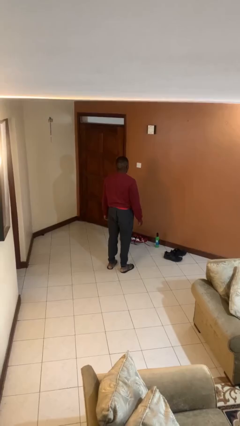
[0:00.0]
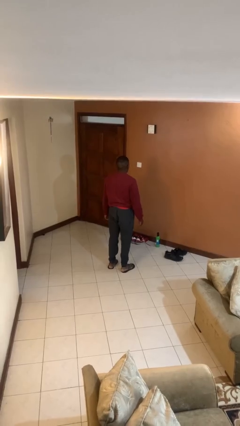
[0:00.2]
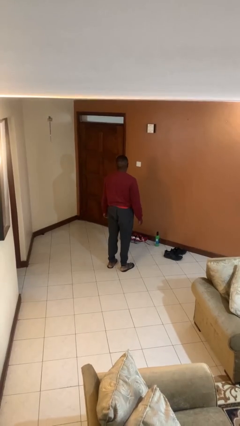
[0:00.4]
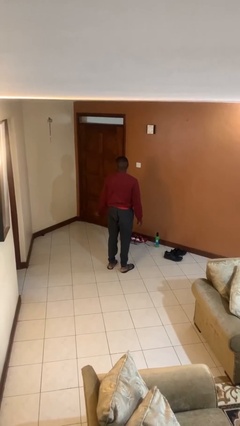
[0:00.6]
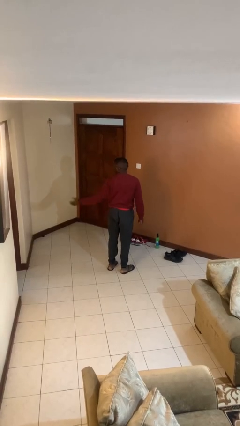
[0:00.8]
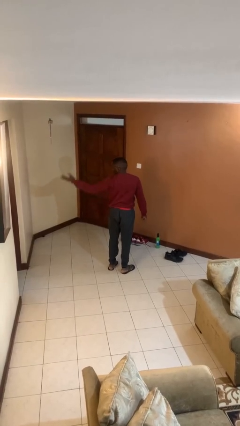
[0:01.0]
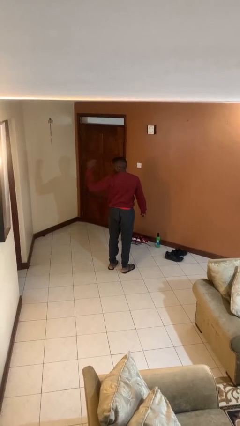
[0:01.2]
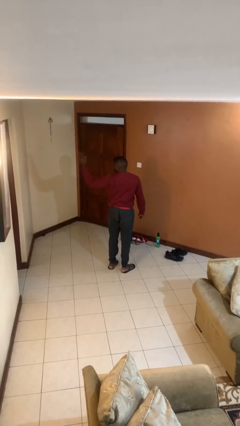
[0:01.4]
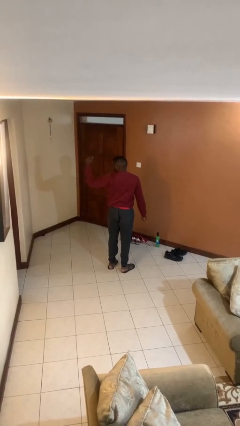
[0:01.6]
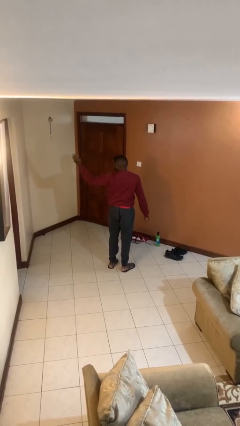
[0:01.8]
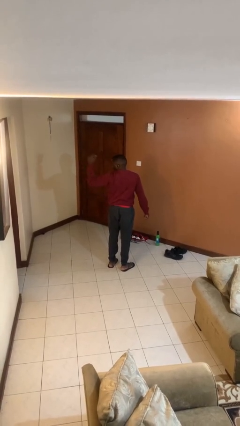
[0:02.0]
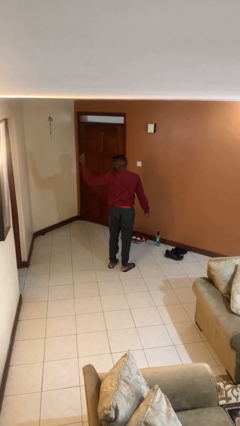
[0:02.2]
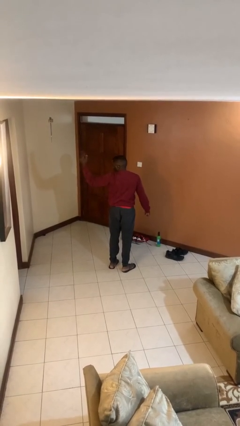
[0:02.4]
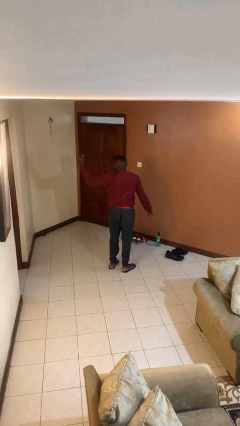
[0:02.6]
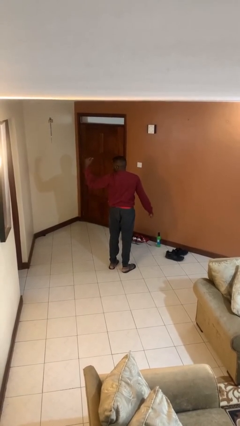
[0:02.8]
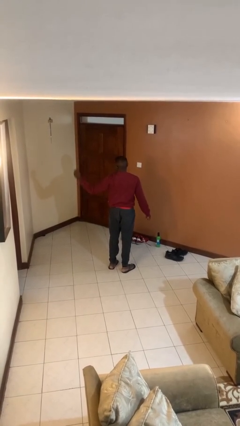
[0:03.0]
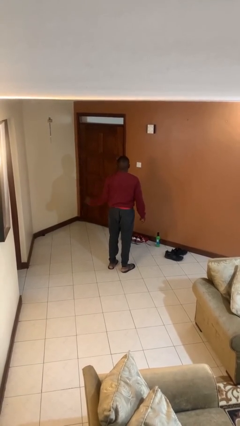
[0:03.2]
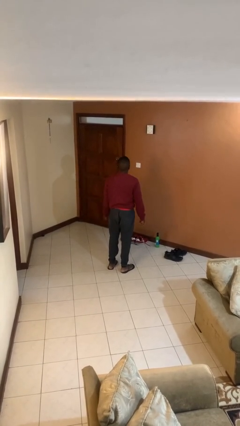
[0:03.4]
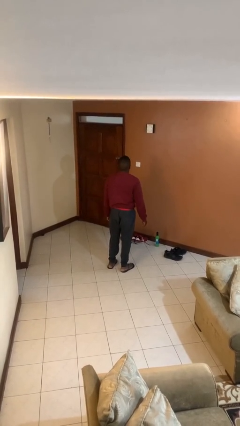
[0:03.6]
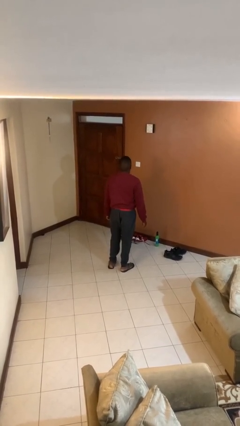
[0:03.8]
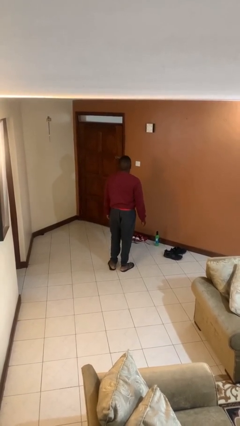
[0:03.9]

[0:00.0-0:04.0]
person gestures come here

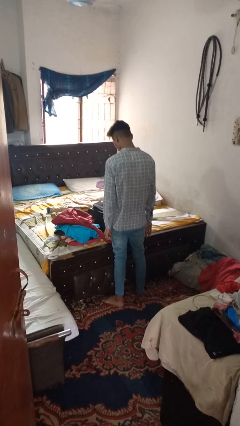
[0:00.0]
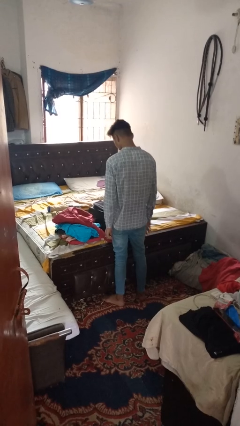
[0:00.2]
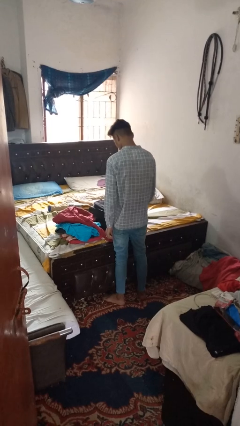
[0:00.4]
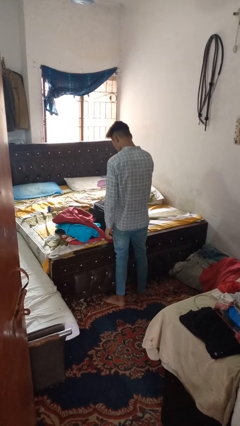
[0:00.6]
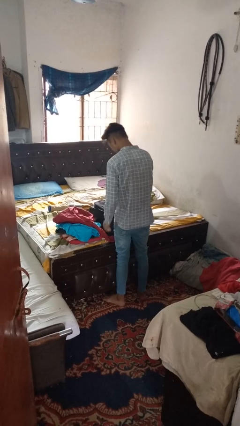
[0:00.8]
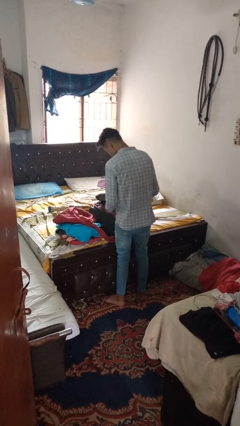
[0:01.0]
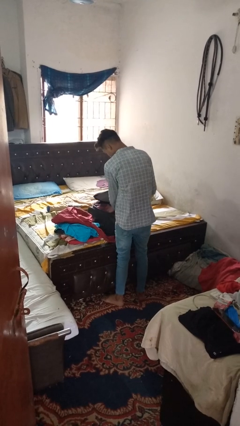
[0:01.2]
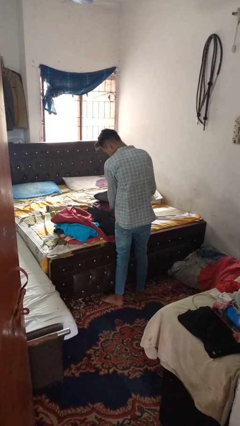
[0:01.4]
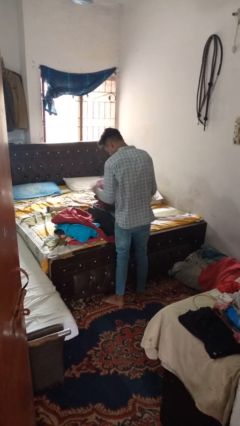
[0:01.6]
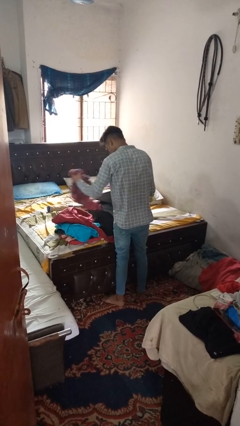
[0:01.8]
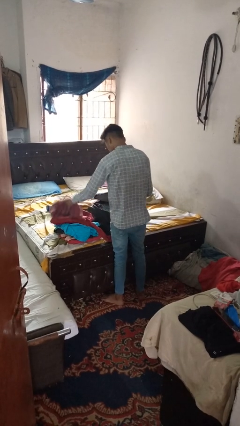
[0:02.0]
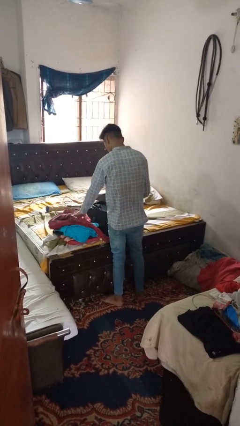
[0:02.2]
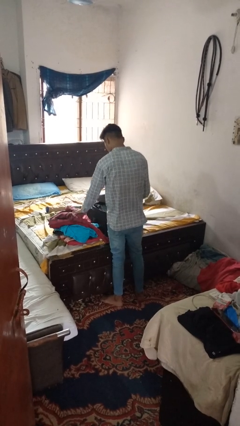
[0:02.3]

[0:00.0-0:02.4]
person unloads clothes from suitcase

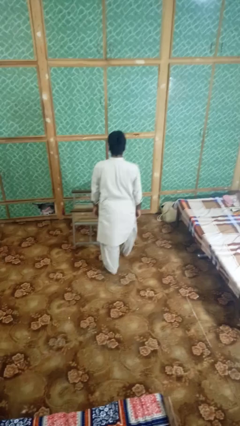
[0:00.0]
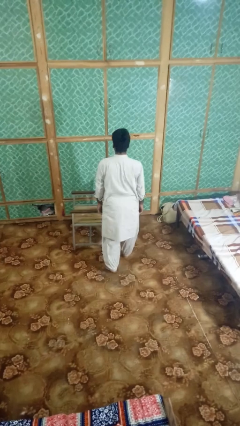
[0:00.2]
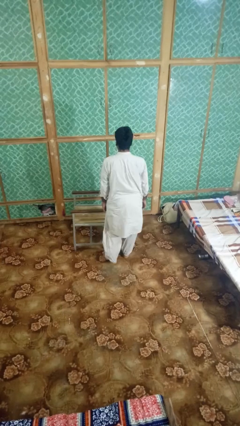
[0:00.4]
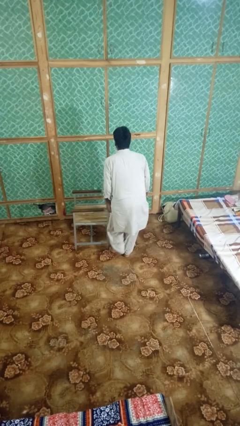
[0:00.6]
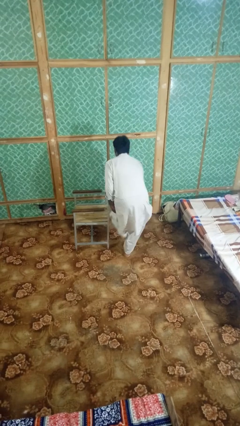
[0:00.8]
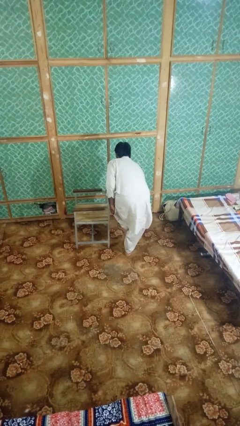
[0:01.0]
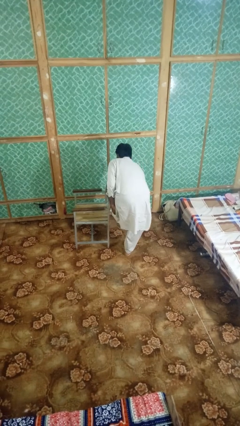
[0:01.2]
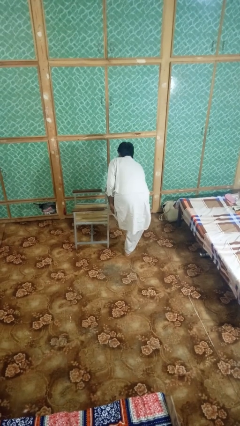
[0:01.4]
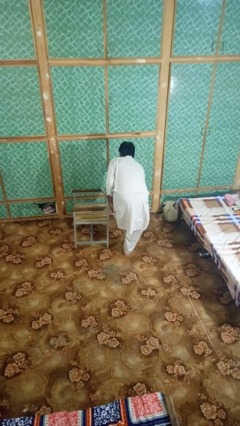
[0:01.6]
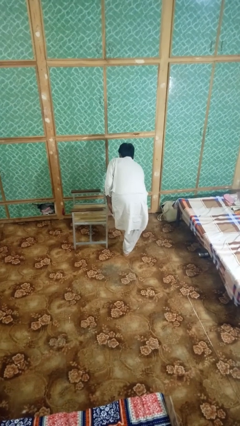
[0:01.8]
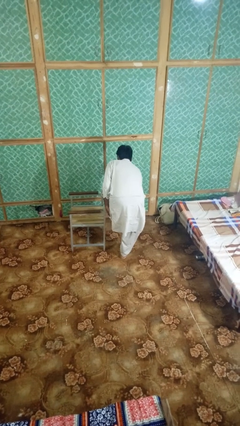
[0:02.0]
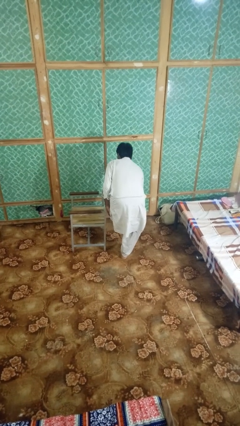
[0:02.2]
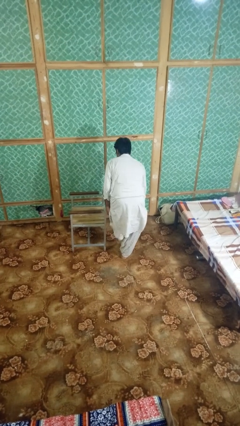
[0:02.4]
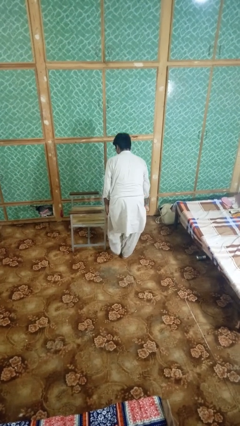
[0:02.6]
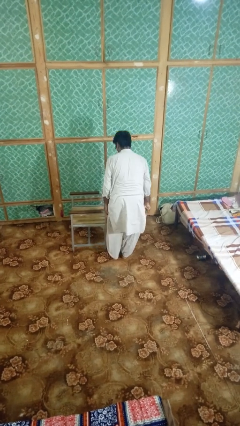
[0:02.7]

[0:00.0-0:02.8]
person stubs toe

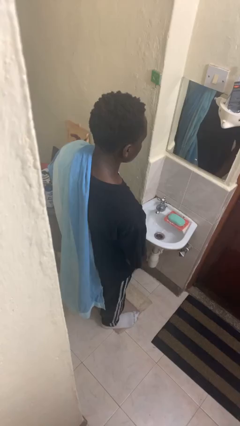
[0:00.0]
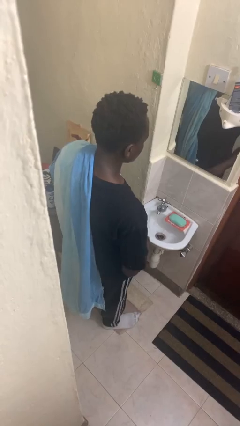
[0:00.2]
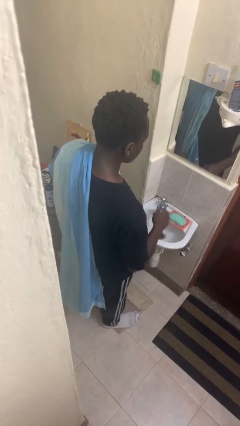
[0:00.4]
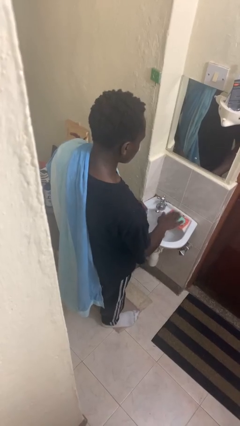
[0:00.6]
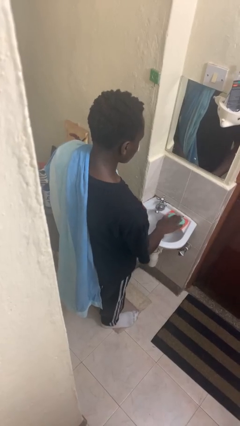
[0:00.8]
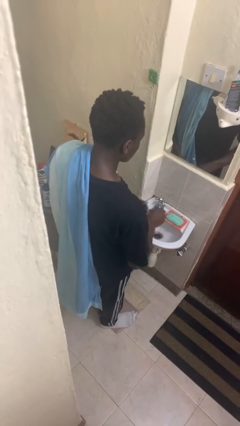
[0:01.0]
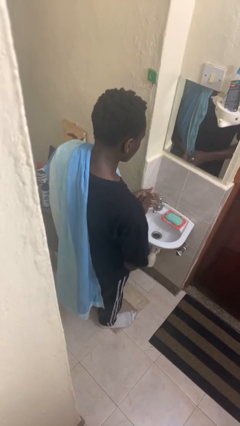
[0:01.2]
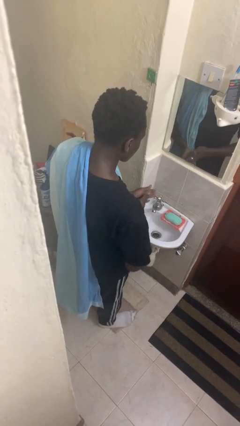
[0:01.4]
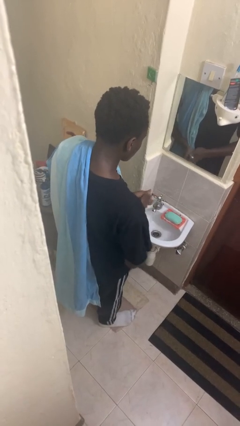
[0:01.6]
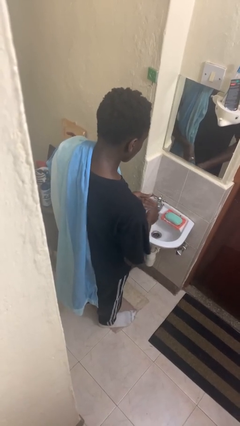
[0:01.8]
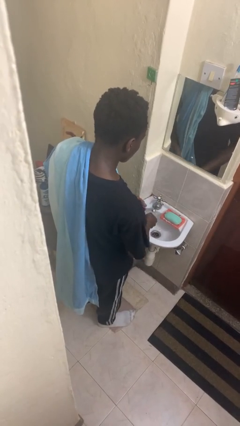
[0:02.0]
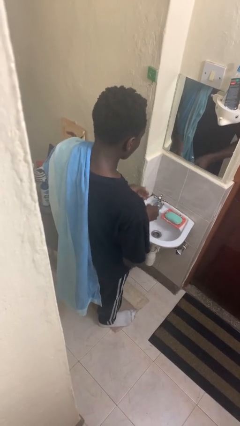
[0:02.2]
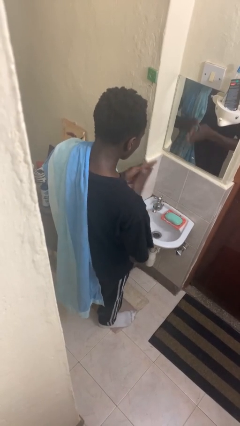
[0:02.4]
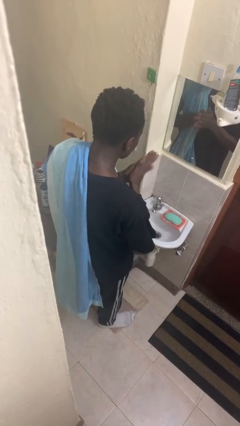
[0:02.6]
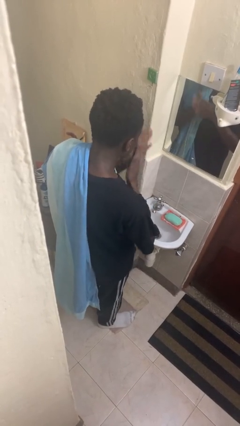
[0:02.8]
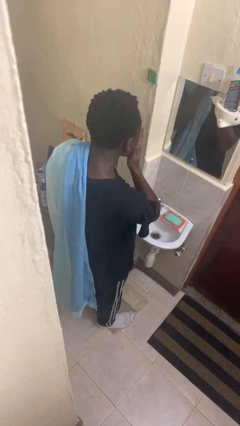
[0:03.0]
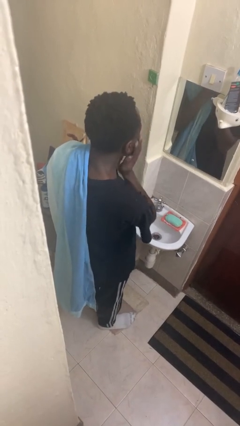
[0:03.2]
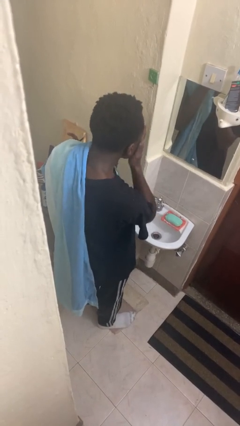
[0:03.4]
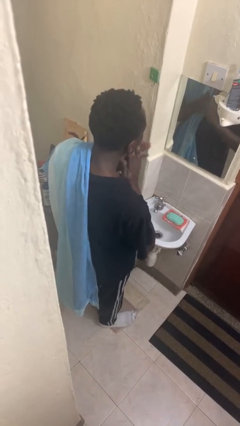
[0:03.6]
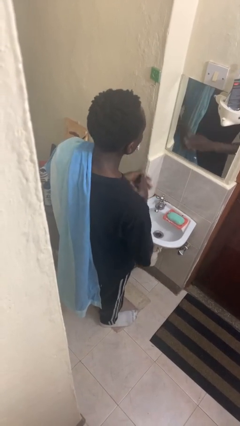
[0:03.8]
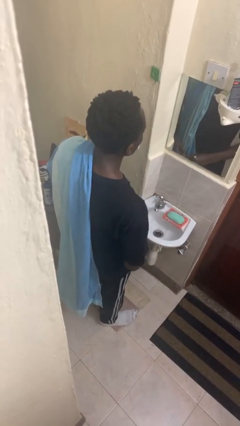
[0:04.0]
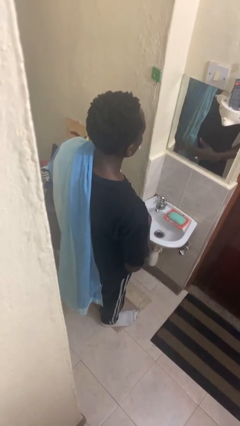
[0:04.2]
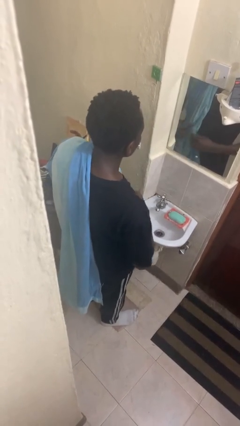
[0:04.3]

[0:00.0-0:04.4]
person washes face

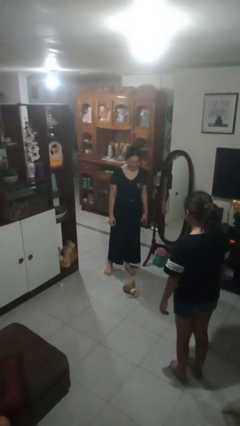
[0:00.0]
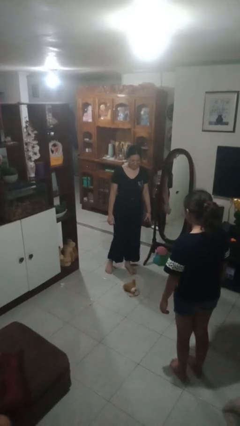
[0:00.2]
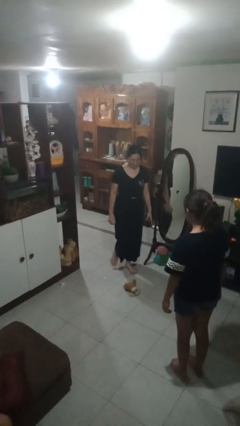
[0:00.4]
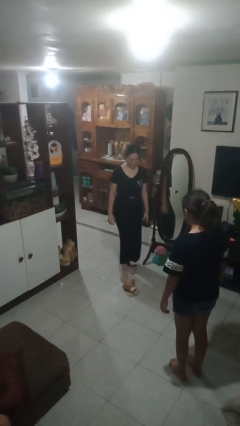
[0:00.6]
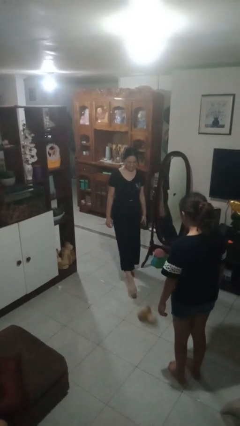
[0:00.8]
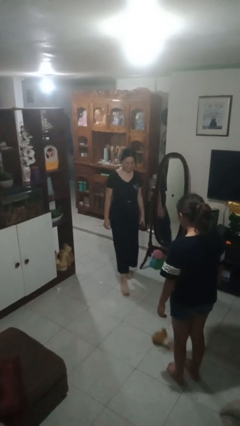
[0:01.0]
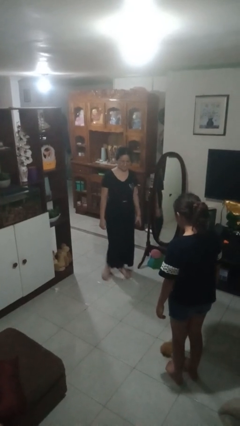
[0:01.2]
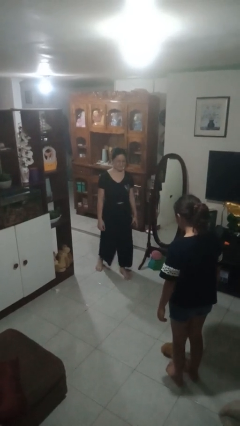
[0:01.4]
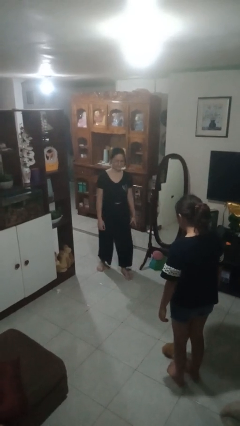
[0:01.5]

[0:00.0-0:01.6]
person kicks object to person

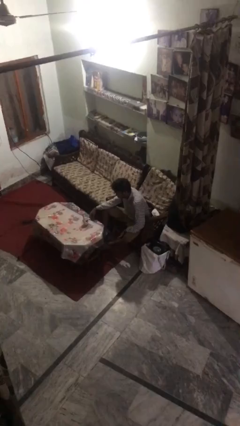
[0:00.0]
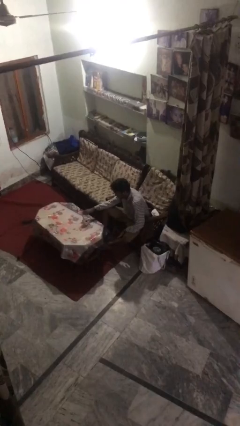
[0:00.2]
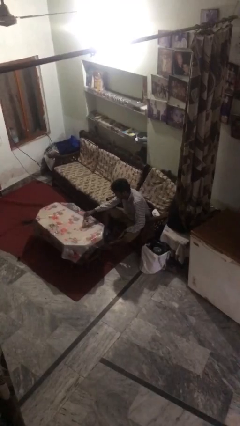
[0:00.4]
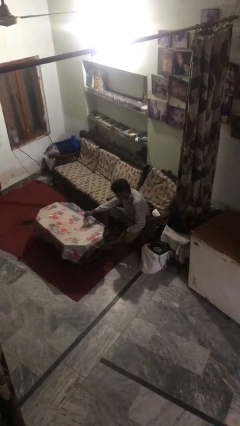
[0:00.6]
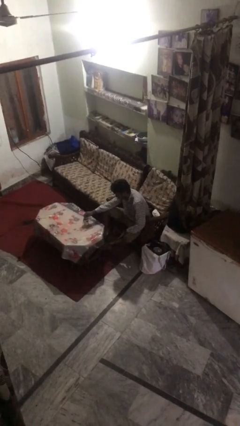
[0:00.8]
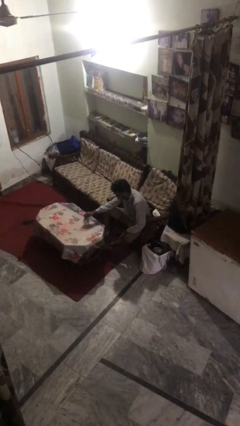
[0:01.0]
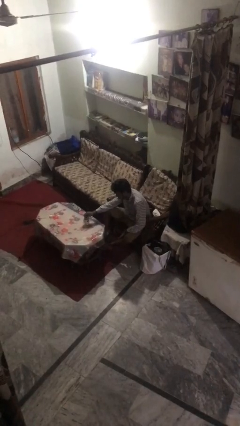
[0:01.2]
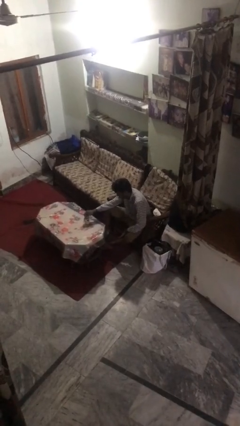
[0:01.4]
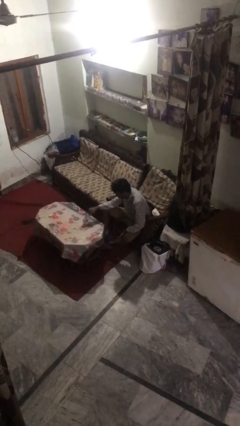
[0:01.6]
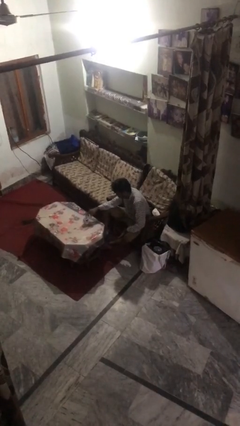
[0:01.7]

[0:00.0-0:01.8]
person stirs mug
